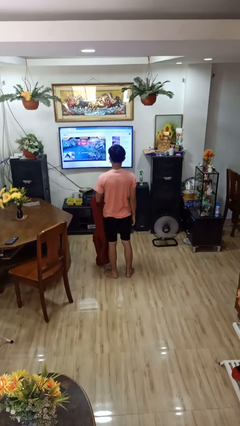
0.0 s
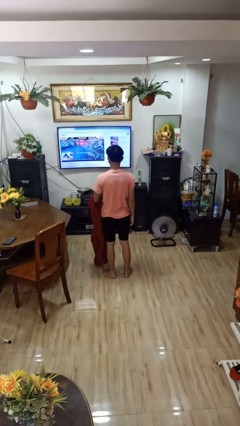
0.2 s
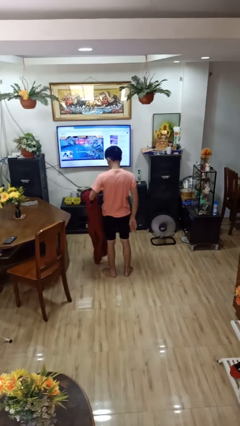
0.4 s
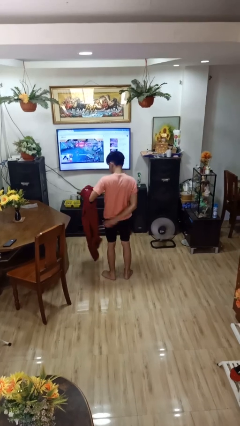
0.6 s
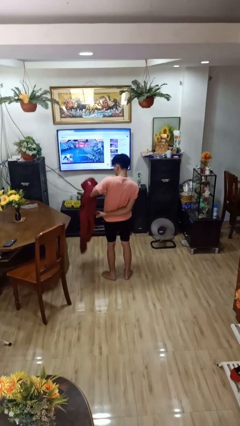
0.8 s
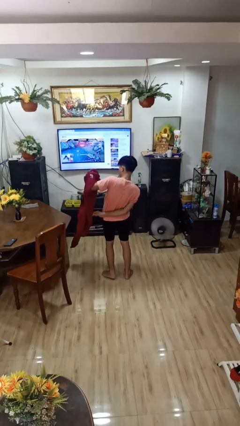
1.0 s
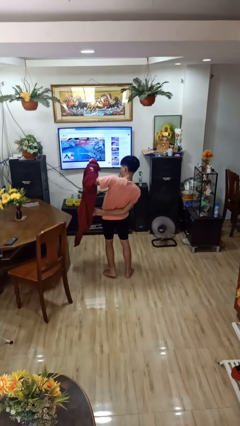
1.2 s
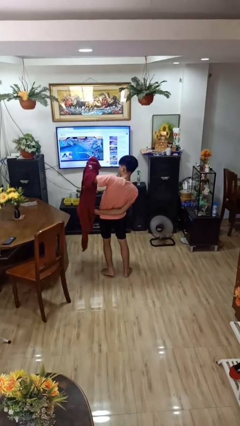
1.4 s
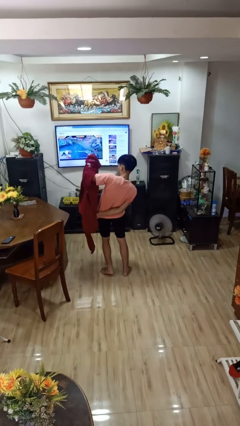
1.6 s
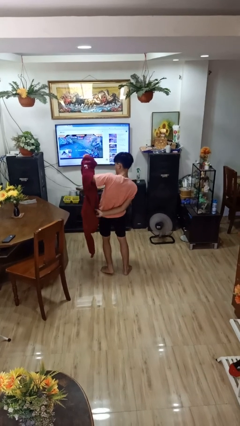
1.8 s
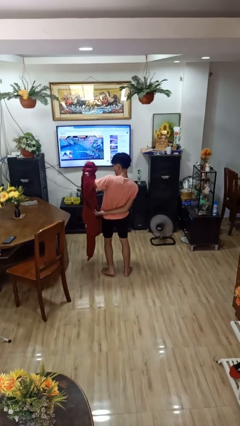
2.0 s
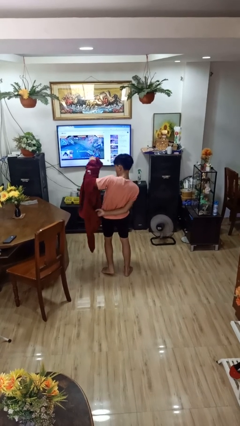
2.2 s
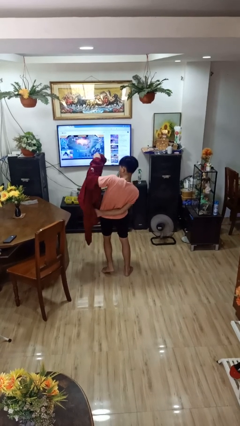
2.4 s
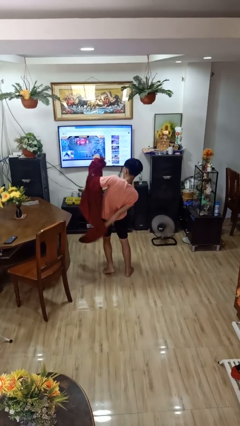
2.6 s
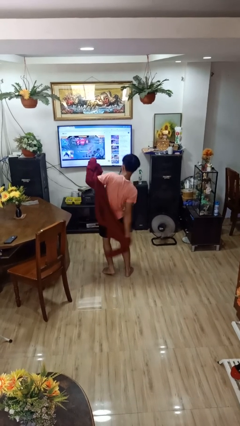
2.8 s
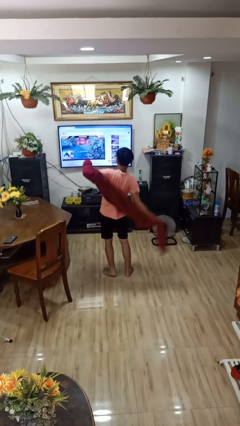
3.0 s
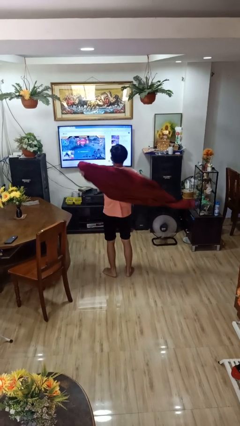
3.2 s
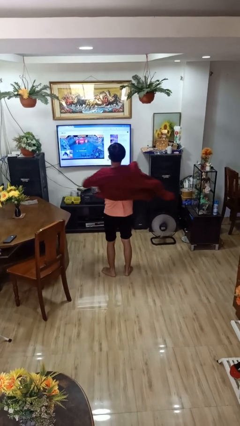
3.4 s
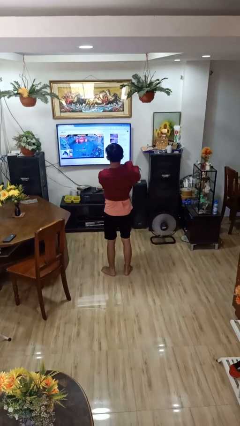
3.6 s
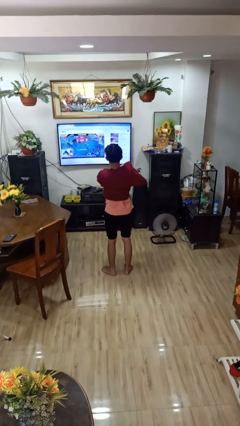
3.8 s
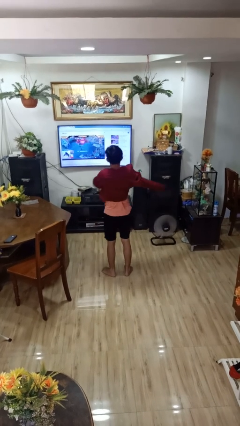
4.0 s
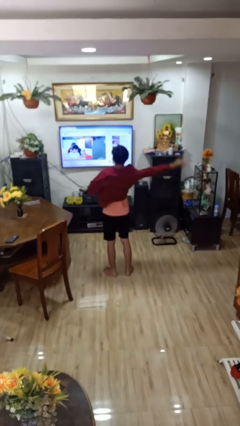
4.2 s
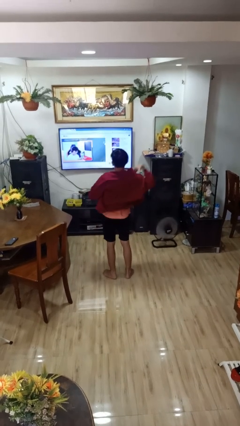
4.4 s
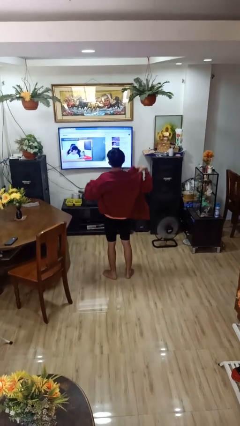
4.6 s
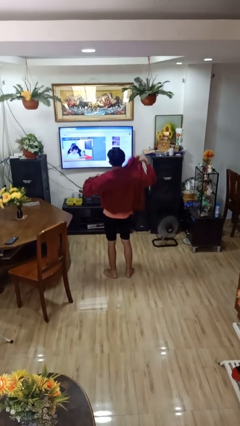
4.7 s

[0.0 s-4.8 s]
person puts on jacket

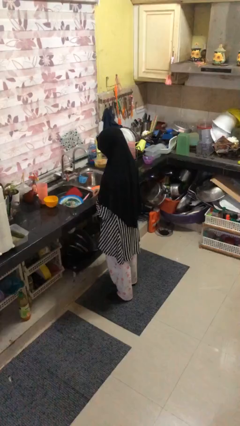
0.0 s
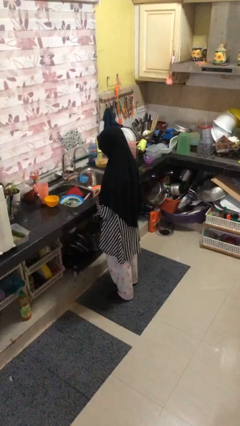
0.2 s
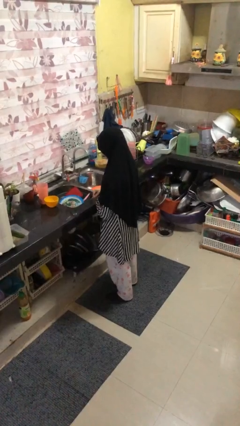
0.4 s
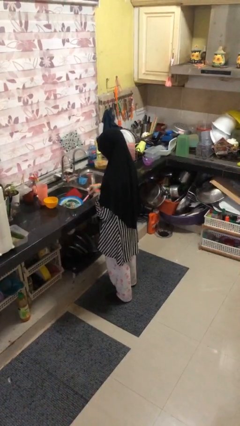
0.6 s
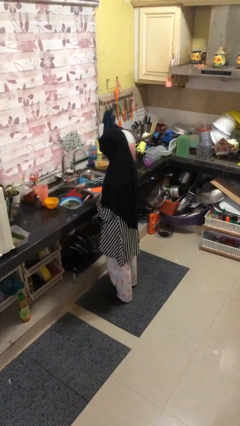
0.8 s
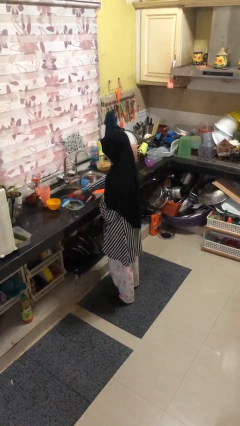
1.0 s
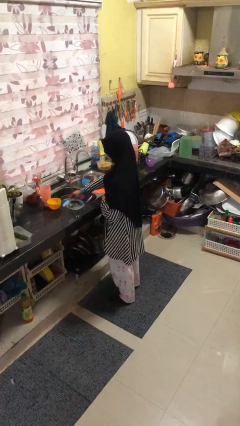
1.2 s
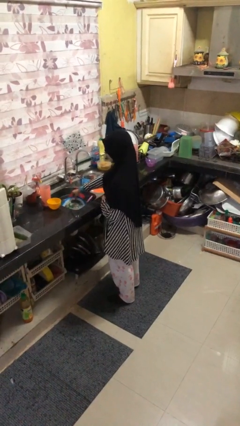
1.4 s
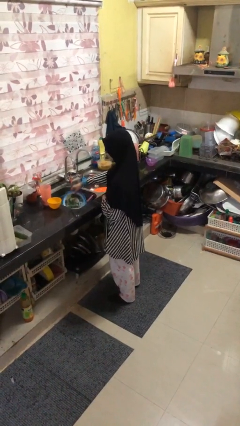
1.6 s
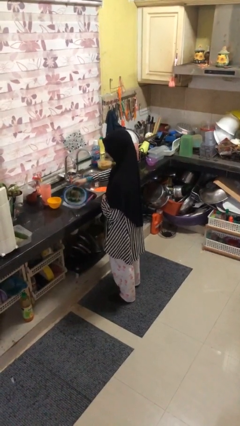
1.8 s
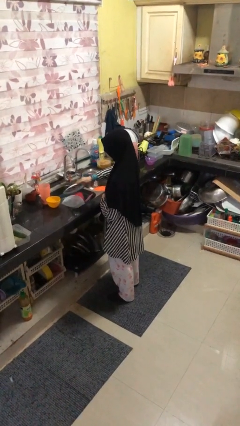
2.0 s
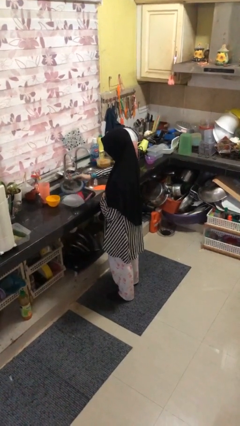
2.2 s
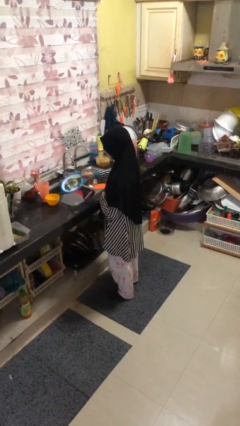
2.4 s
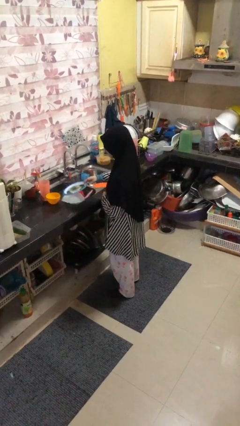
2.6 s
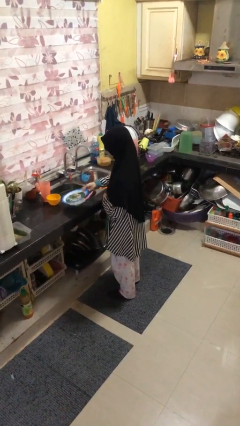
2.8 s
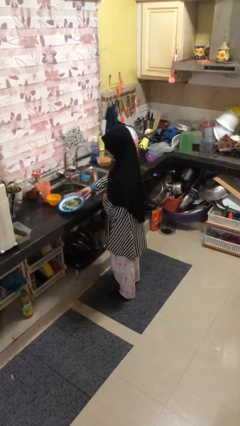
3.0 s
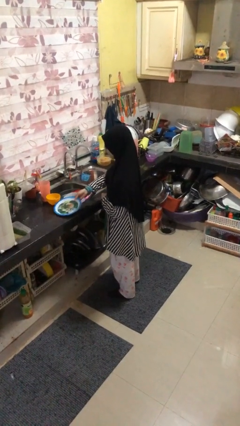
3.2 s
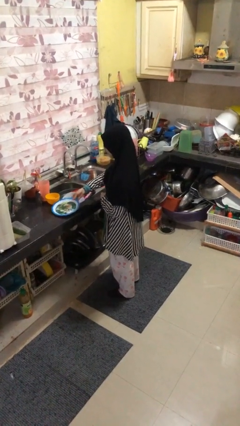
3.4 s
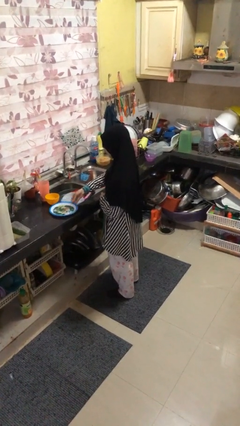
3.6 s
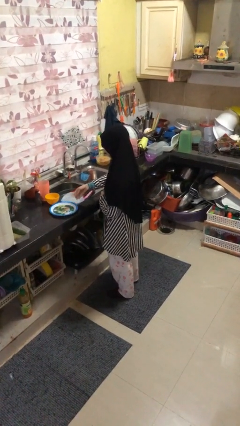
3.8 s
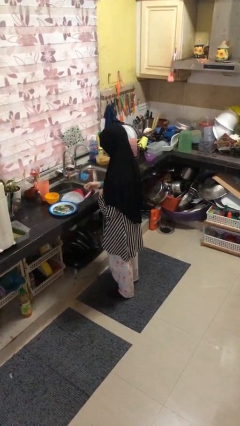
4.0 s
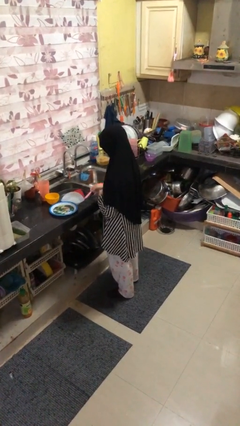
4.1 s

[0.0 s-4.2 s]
person unloads dishwasher

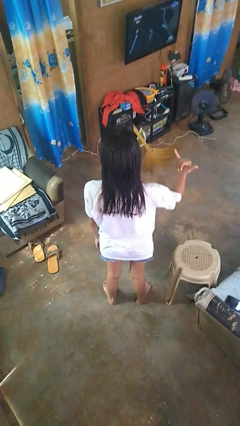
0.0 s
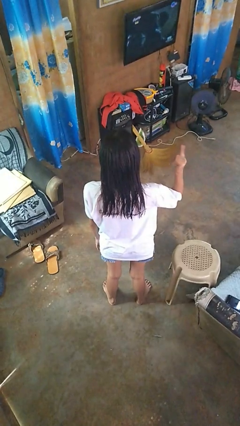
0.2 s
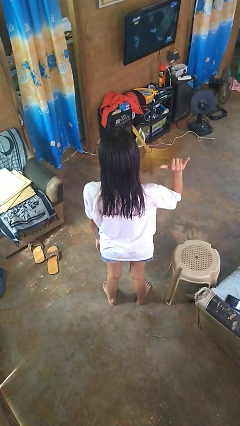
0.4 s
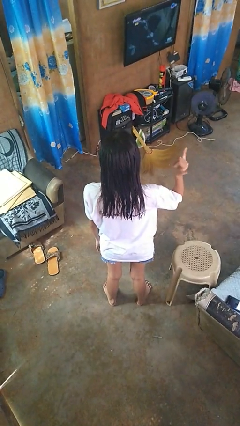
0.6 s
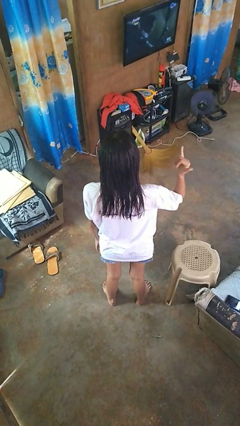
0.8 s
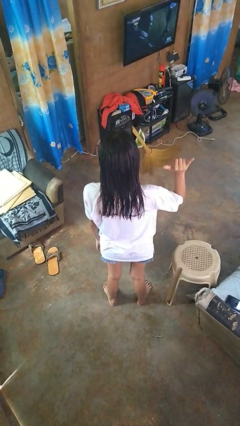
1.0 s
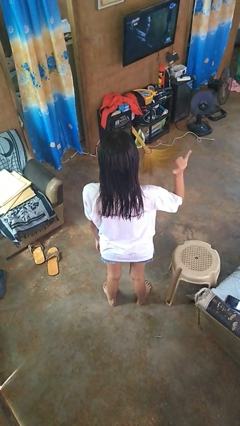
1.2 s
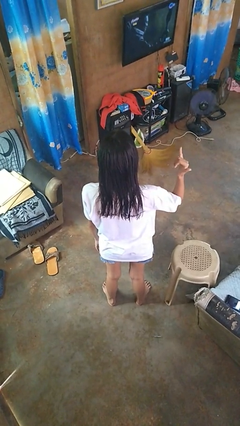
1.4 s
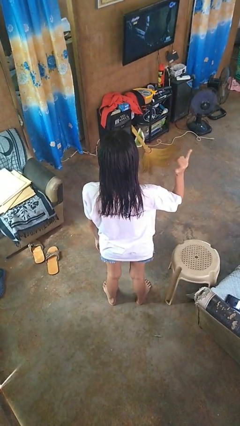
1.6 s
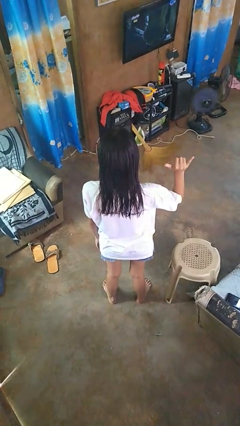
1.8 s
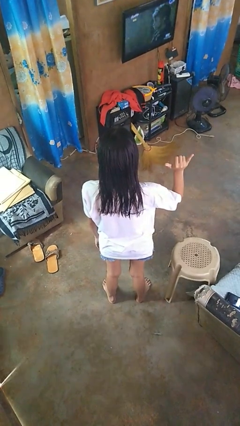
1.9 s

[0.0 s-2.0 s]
person gestures hang loose

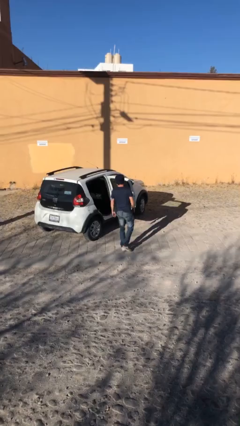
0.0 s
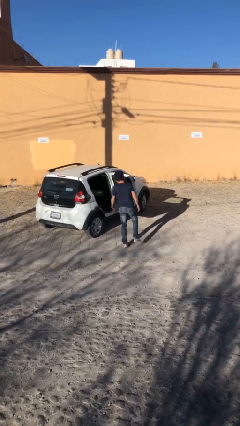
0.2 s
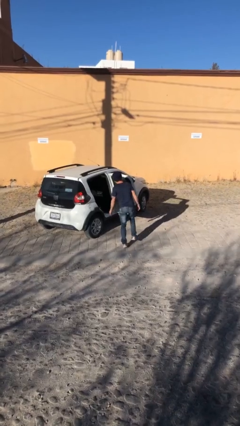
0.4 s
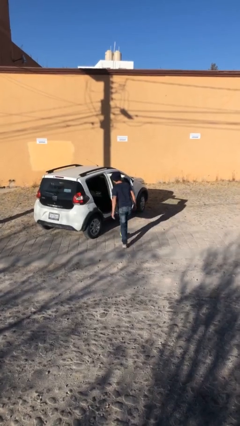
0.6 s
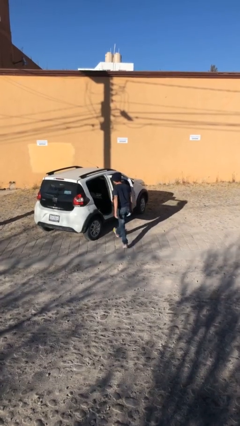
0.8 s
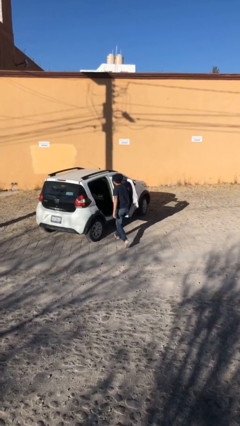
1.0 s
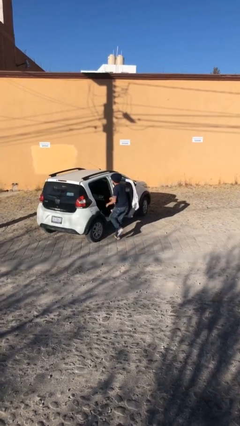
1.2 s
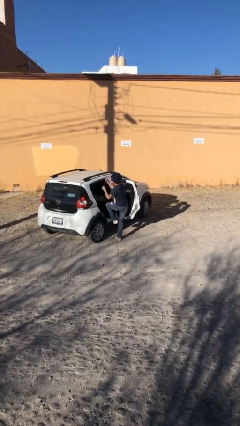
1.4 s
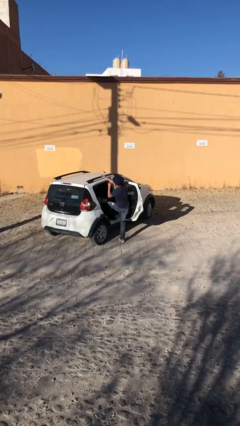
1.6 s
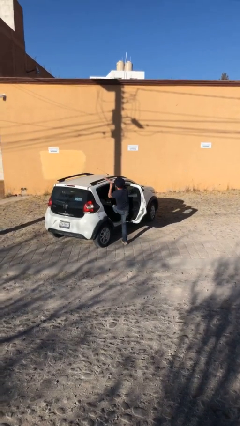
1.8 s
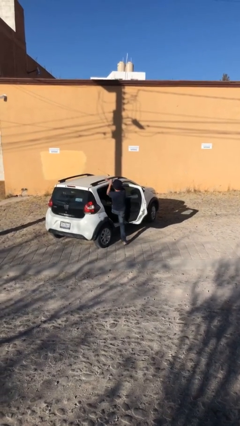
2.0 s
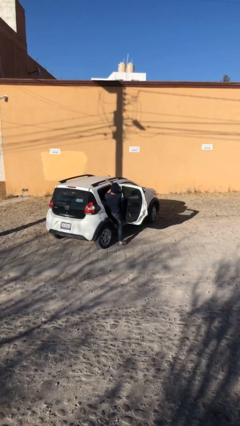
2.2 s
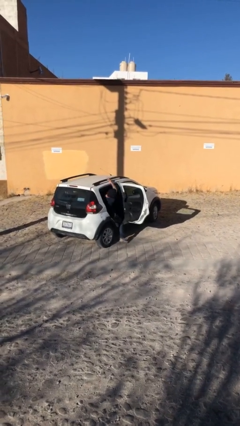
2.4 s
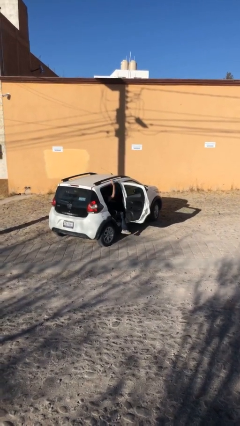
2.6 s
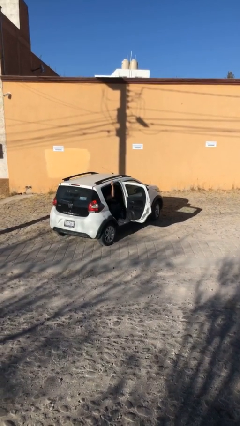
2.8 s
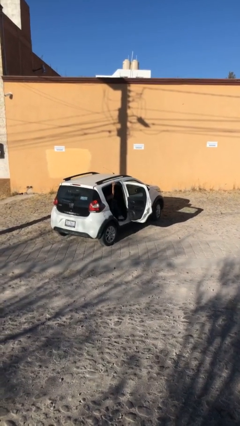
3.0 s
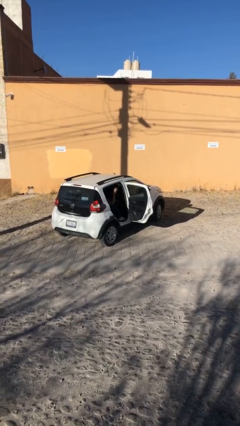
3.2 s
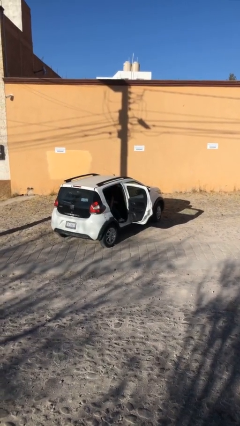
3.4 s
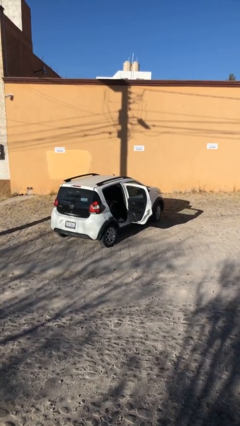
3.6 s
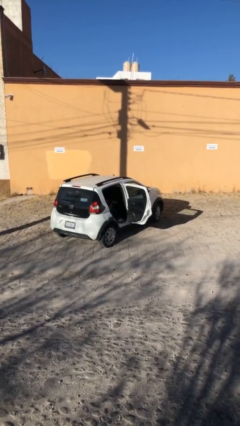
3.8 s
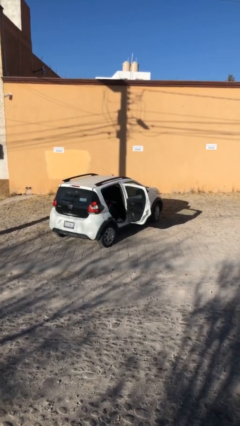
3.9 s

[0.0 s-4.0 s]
person enters car

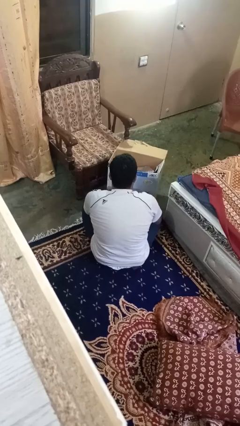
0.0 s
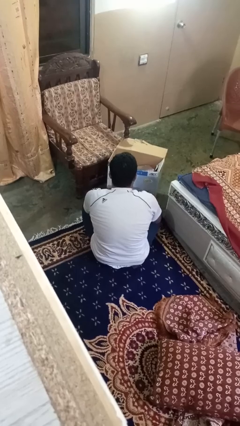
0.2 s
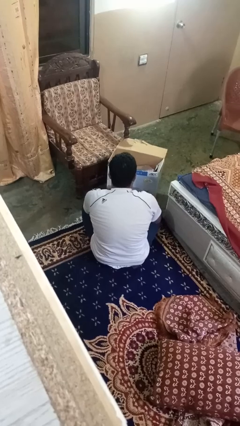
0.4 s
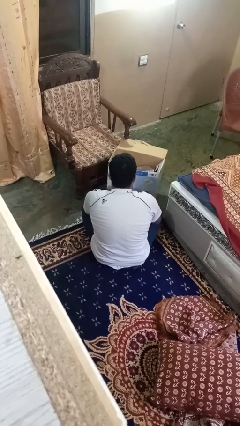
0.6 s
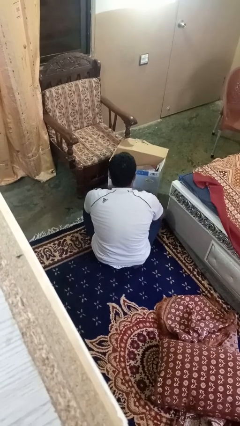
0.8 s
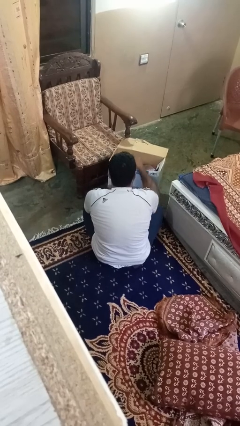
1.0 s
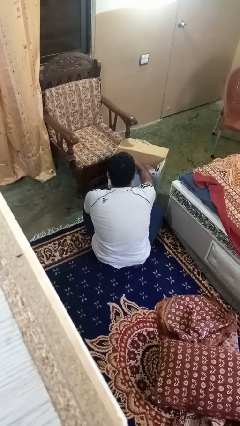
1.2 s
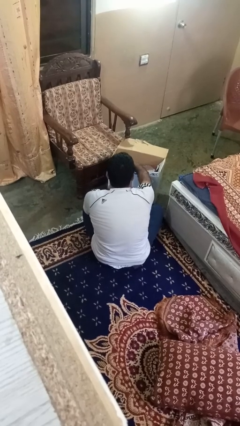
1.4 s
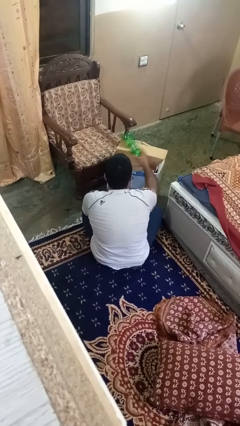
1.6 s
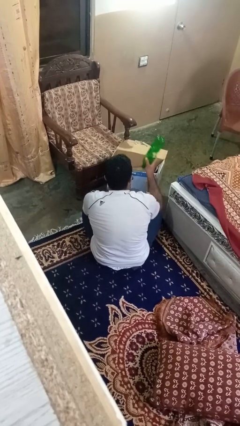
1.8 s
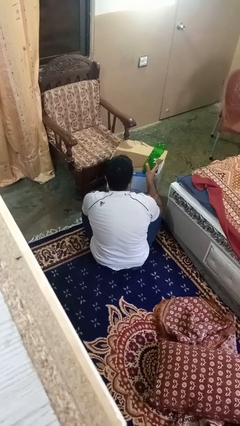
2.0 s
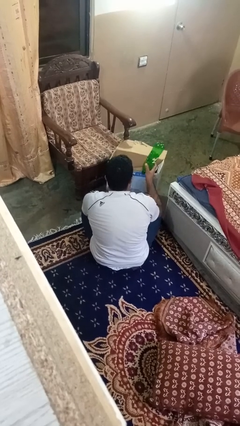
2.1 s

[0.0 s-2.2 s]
person takes object from box

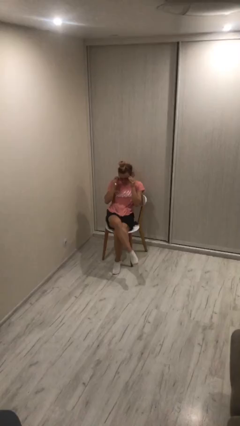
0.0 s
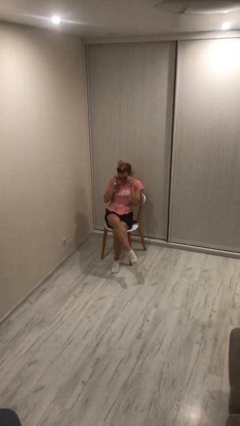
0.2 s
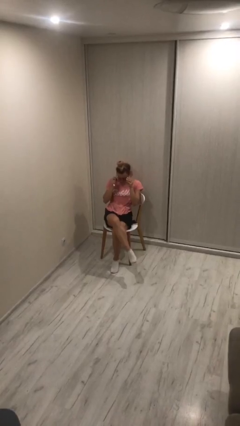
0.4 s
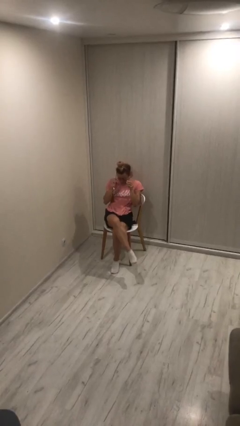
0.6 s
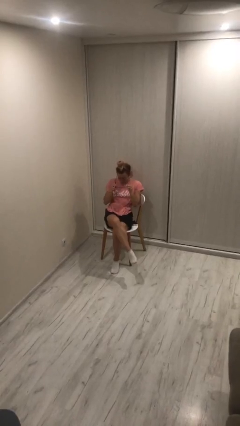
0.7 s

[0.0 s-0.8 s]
person takes off glasses
